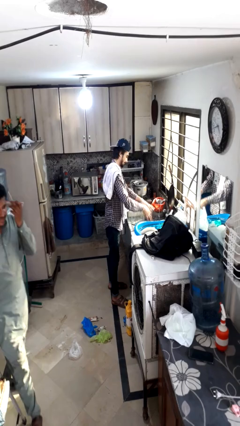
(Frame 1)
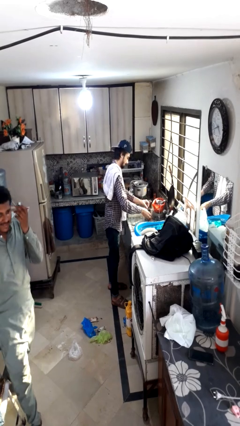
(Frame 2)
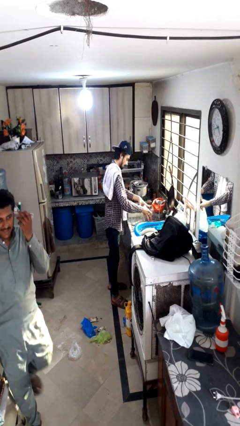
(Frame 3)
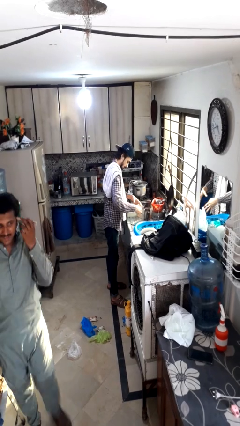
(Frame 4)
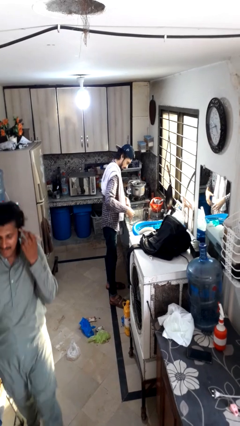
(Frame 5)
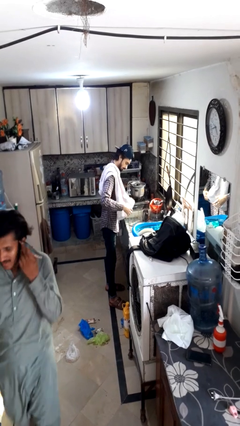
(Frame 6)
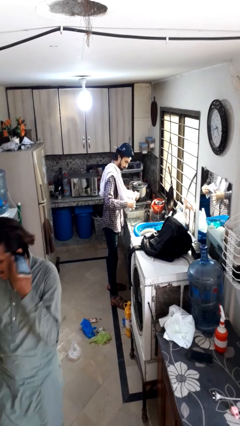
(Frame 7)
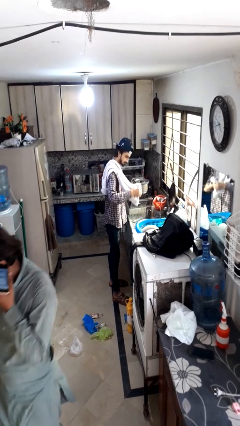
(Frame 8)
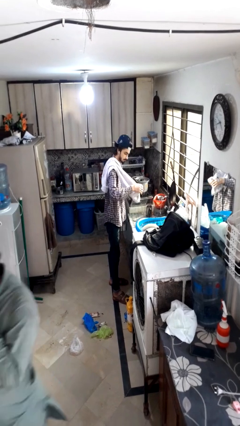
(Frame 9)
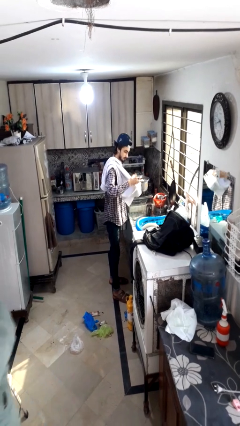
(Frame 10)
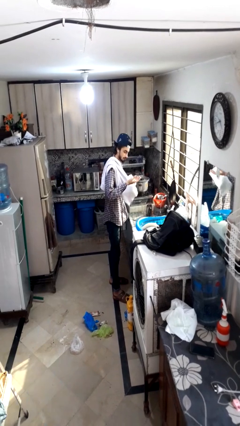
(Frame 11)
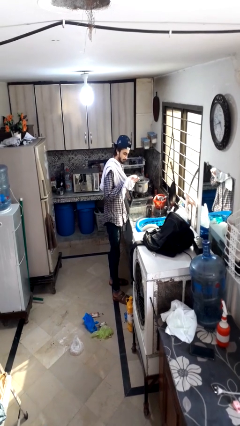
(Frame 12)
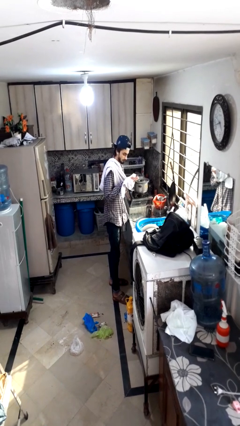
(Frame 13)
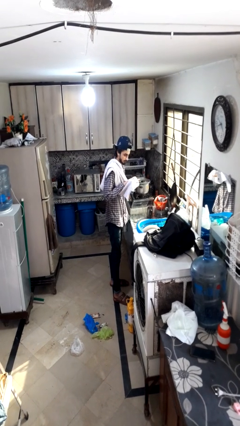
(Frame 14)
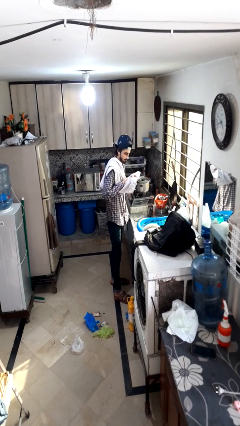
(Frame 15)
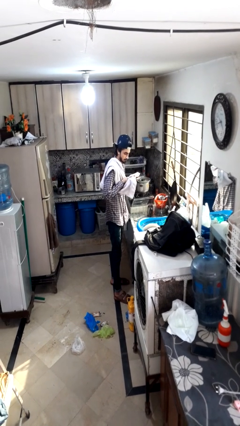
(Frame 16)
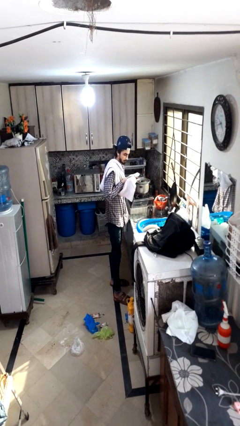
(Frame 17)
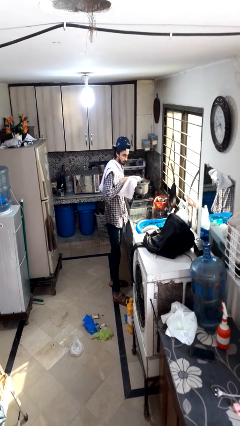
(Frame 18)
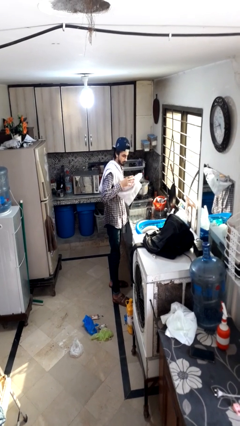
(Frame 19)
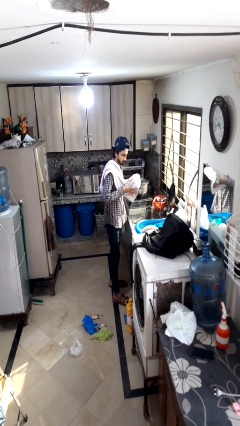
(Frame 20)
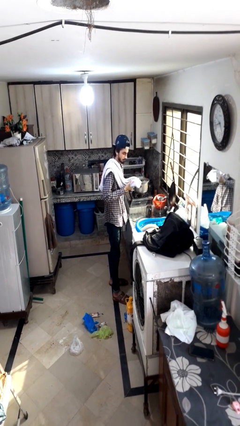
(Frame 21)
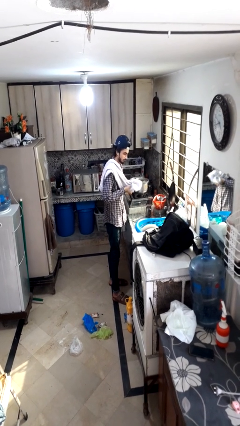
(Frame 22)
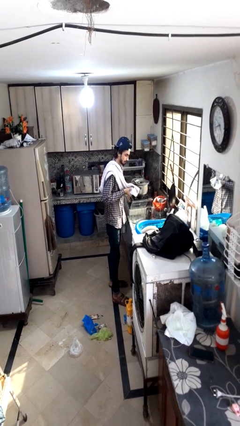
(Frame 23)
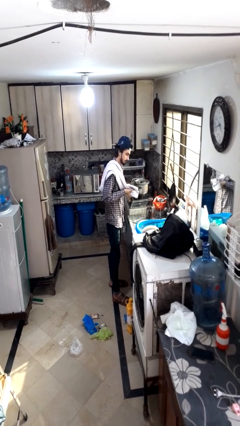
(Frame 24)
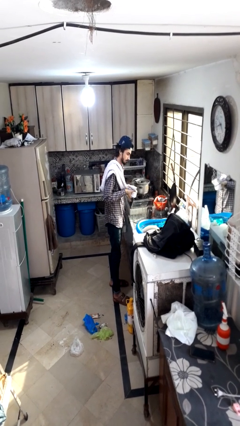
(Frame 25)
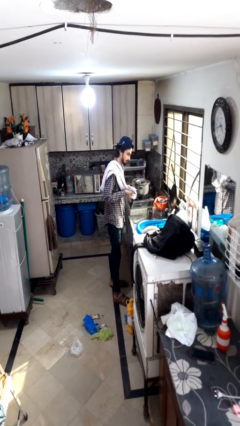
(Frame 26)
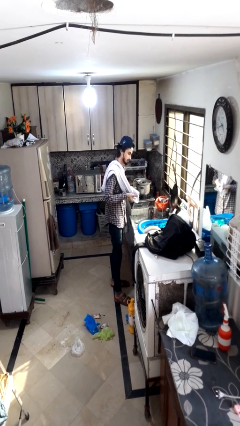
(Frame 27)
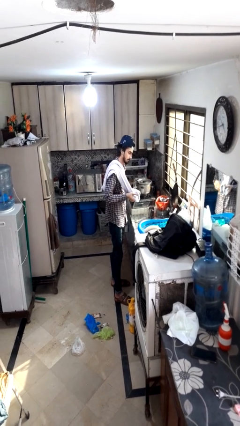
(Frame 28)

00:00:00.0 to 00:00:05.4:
person dries hands with towel

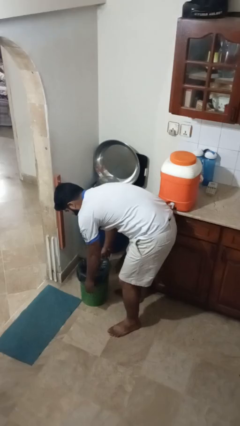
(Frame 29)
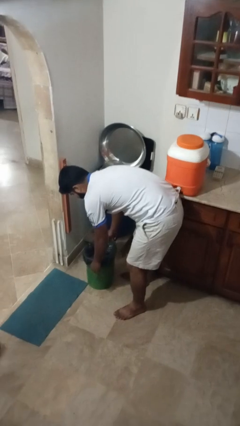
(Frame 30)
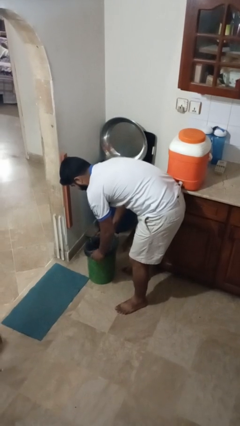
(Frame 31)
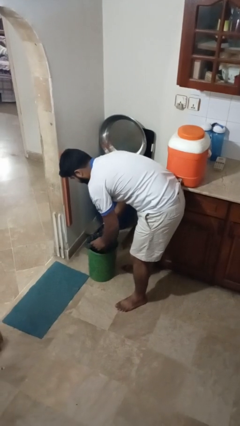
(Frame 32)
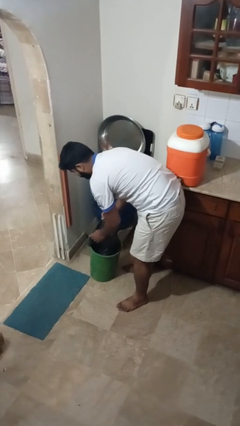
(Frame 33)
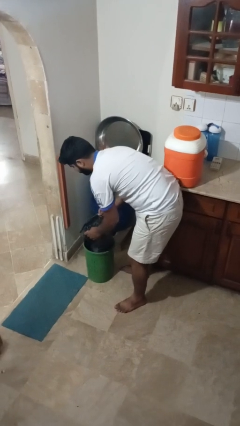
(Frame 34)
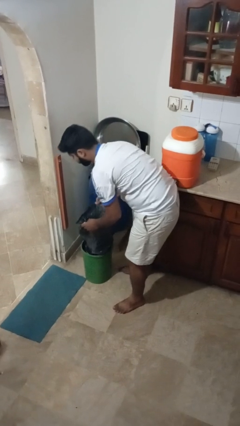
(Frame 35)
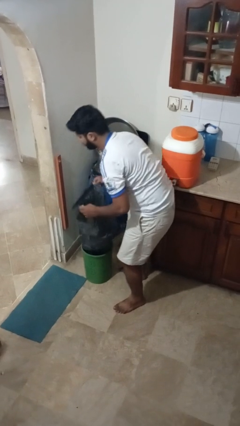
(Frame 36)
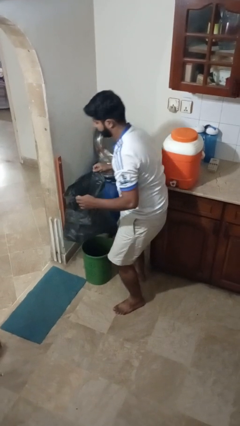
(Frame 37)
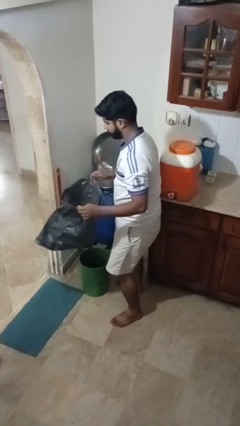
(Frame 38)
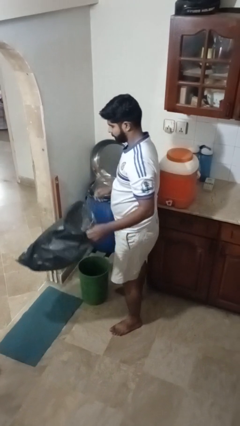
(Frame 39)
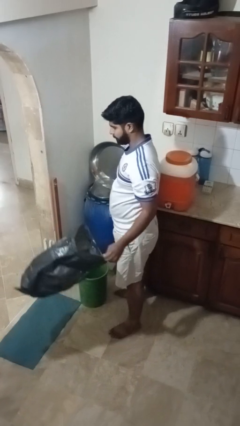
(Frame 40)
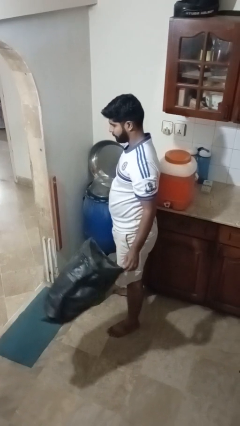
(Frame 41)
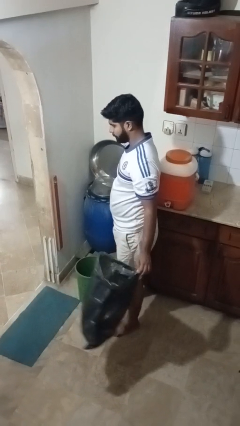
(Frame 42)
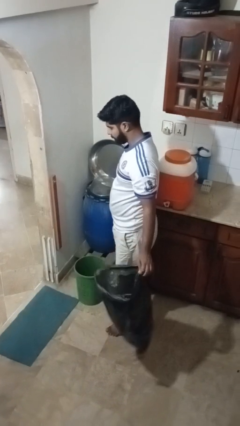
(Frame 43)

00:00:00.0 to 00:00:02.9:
person removes trashbag from trashcan

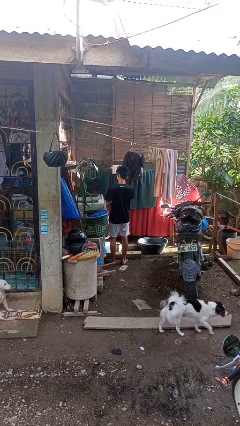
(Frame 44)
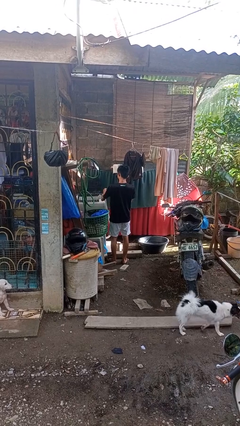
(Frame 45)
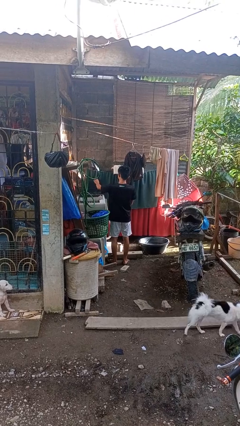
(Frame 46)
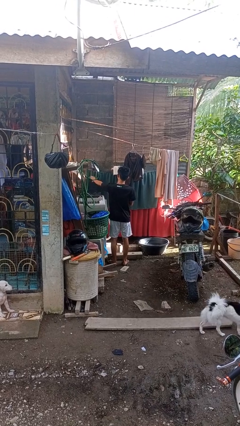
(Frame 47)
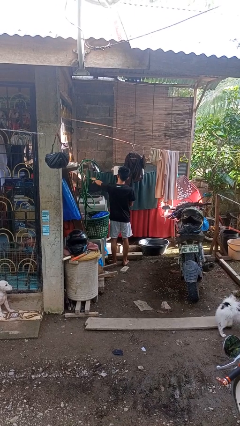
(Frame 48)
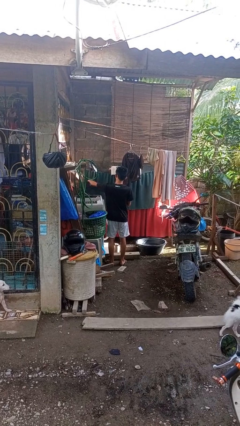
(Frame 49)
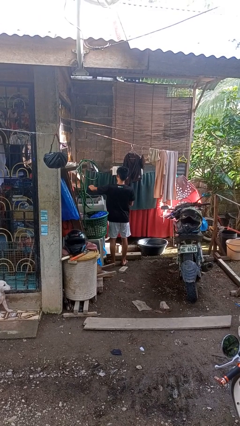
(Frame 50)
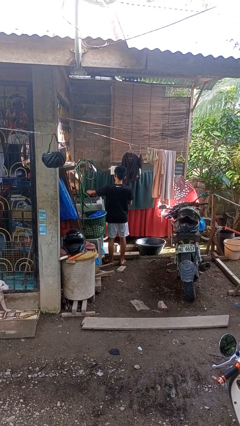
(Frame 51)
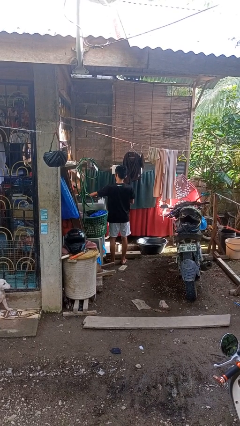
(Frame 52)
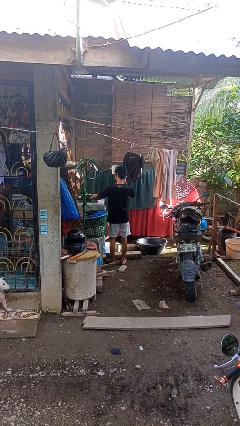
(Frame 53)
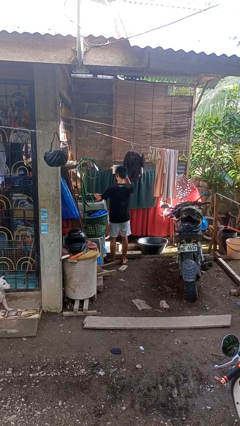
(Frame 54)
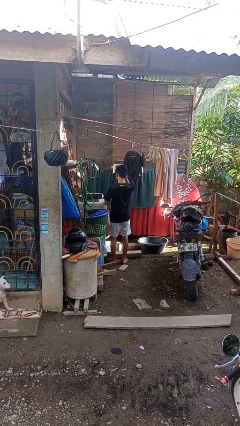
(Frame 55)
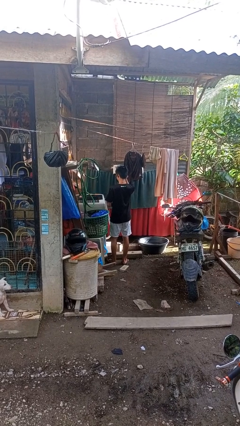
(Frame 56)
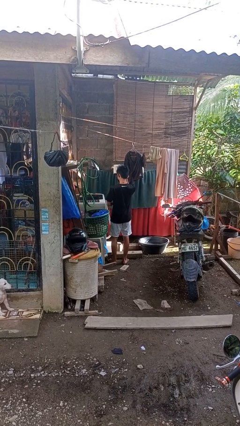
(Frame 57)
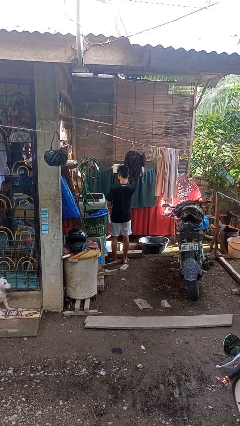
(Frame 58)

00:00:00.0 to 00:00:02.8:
person closes clothes washer

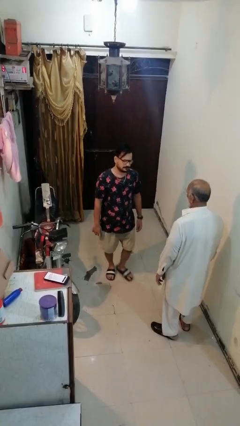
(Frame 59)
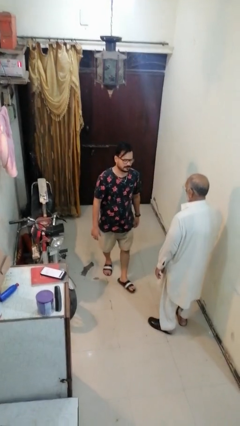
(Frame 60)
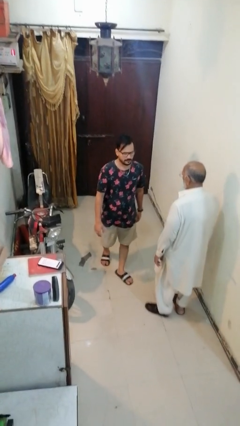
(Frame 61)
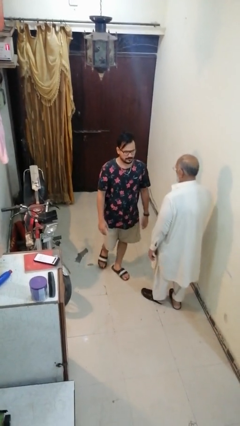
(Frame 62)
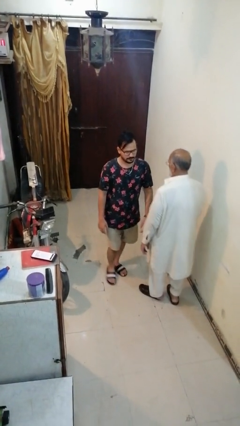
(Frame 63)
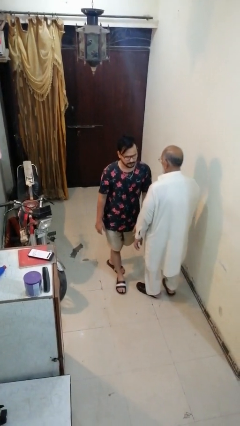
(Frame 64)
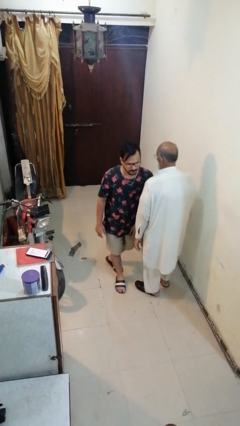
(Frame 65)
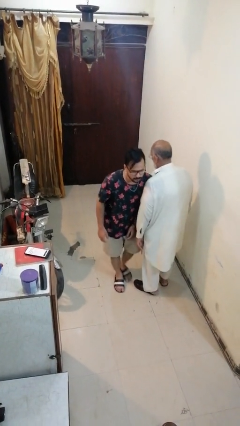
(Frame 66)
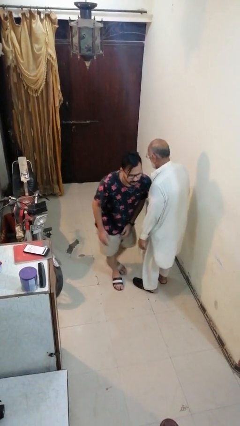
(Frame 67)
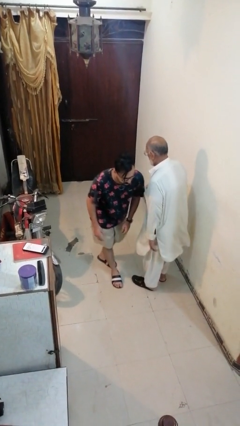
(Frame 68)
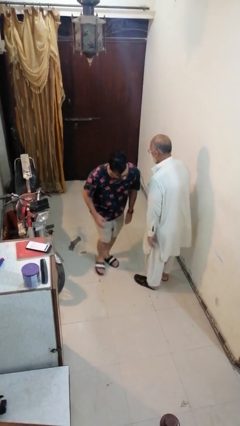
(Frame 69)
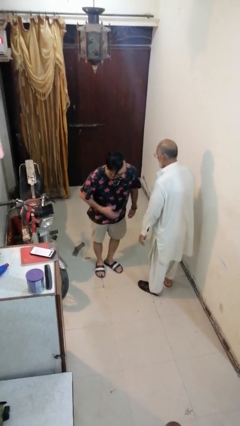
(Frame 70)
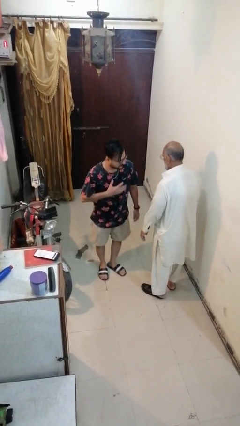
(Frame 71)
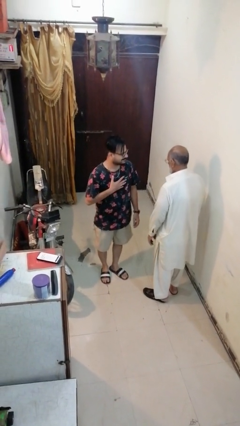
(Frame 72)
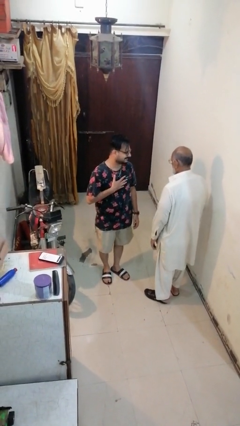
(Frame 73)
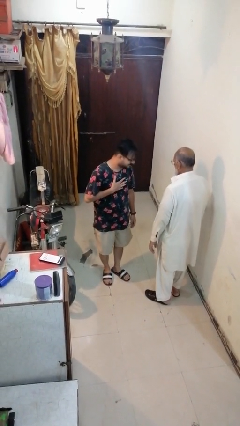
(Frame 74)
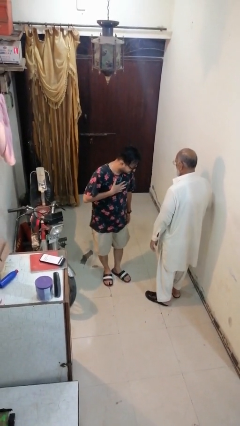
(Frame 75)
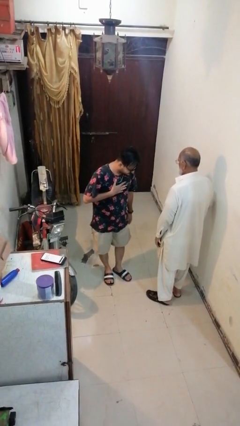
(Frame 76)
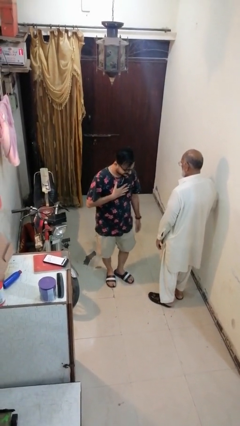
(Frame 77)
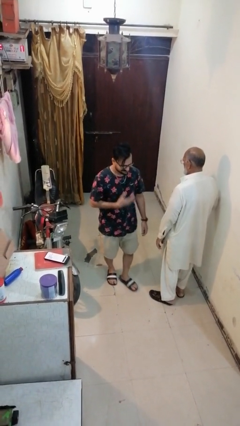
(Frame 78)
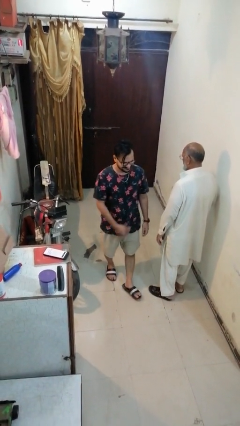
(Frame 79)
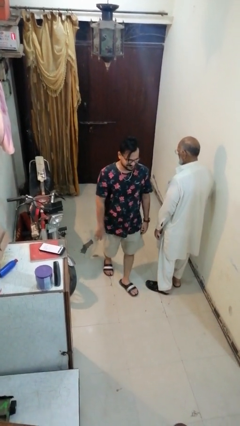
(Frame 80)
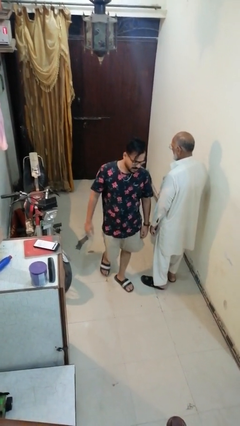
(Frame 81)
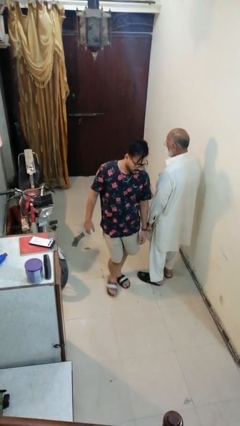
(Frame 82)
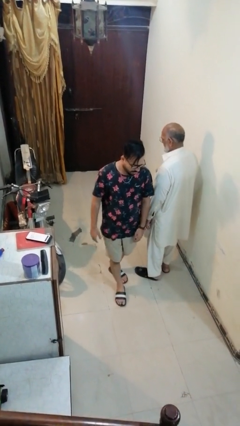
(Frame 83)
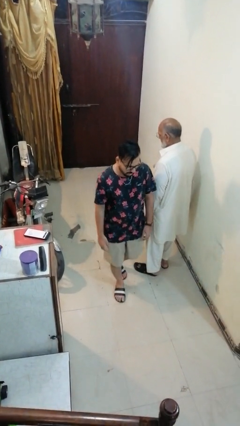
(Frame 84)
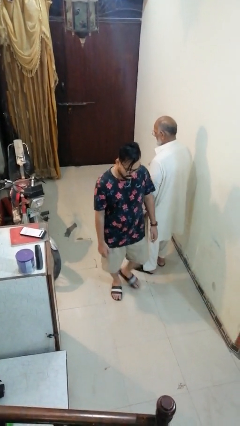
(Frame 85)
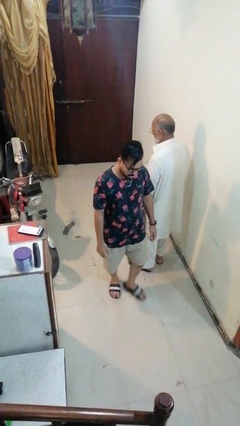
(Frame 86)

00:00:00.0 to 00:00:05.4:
person bumps into person

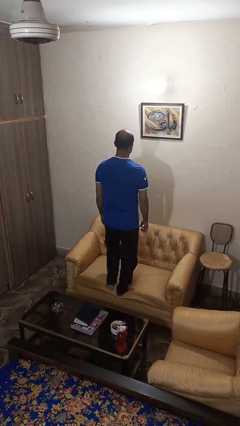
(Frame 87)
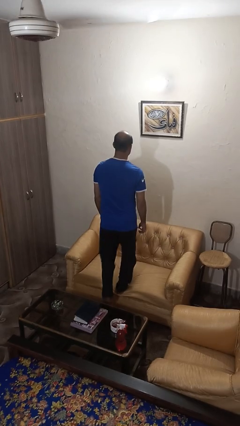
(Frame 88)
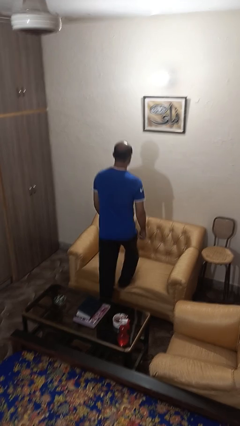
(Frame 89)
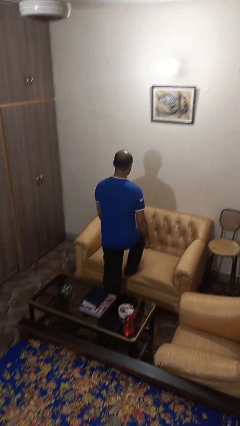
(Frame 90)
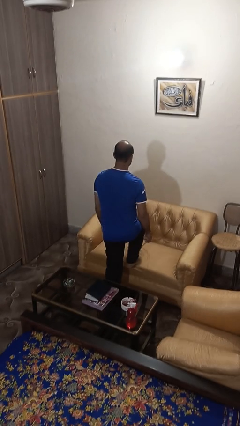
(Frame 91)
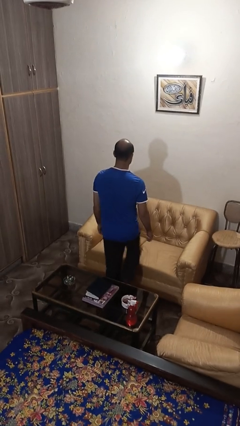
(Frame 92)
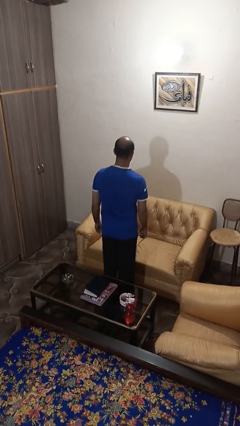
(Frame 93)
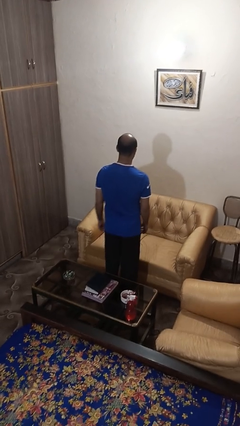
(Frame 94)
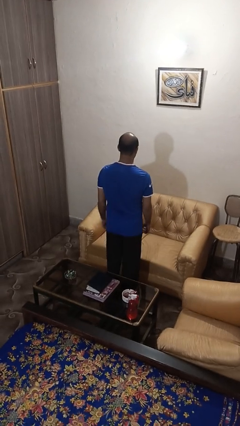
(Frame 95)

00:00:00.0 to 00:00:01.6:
person climbs off couch
